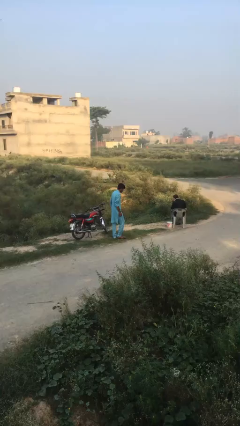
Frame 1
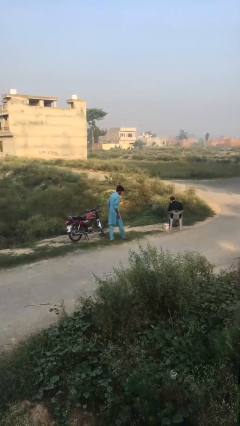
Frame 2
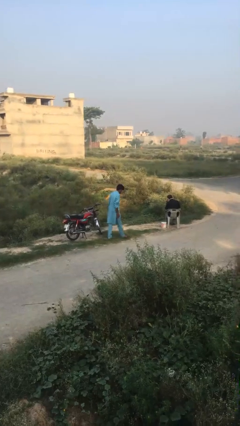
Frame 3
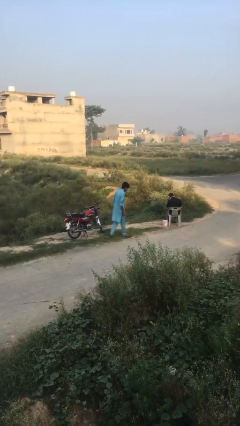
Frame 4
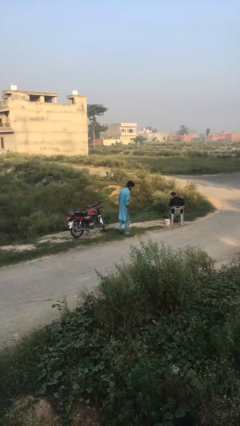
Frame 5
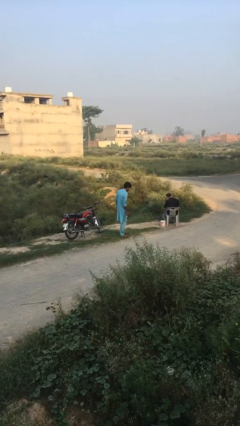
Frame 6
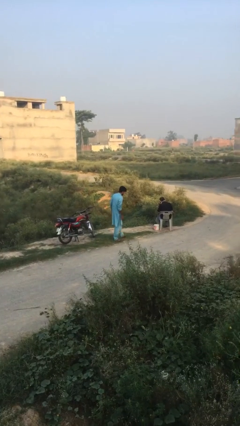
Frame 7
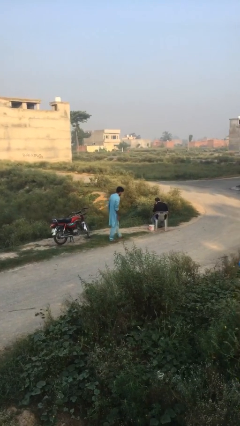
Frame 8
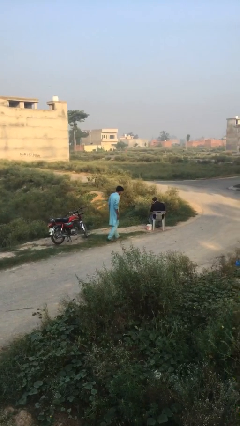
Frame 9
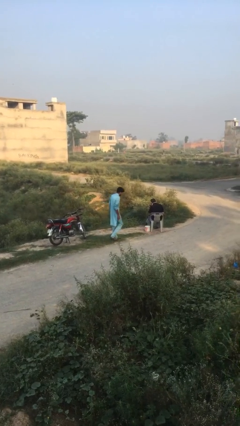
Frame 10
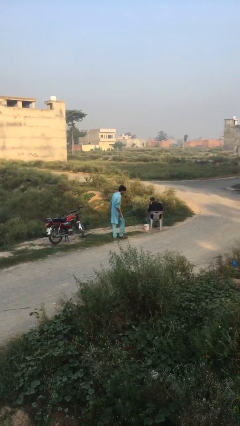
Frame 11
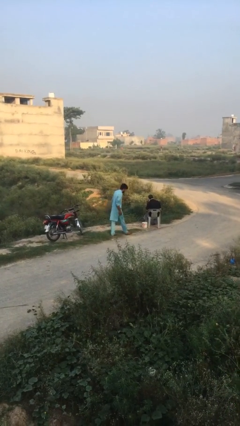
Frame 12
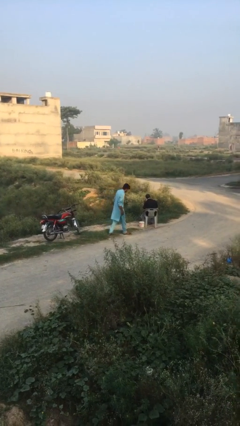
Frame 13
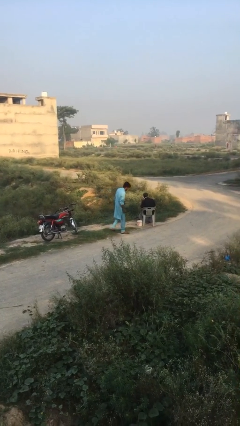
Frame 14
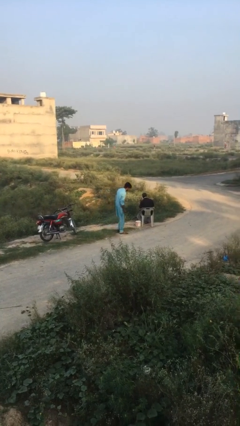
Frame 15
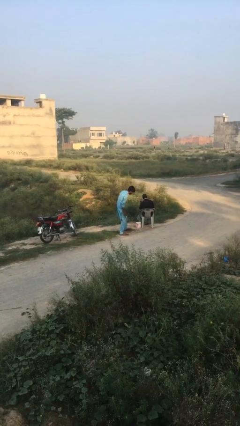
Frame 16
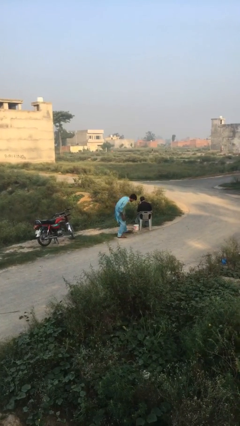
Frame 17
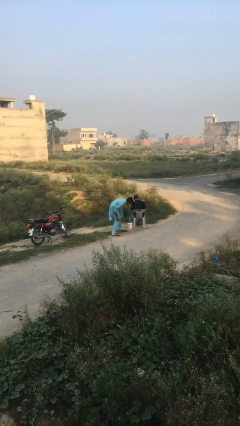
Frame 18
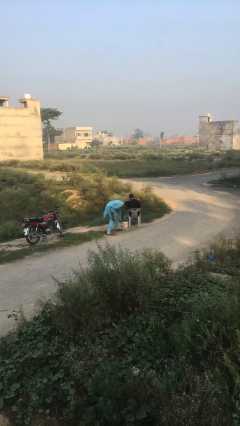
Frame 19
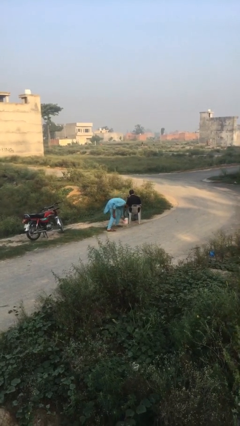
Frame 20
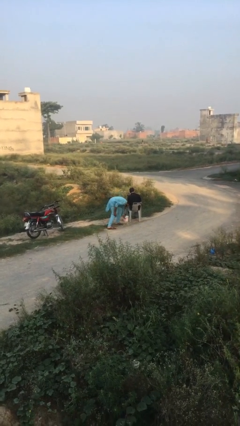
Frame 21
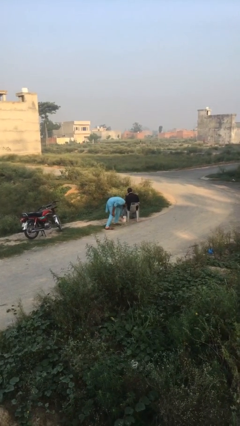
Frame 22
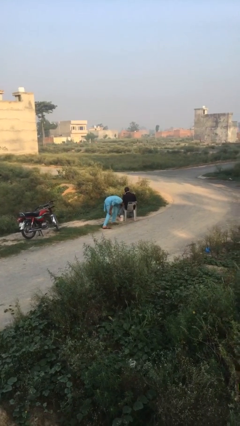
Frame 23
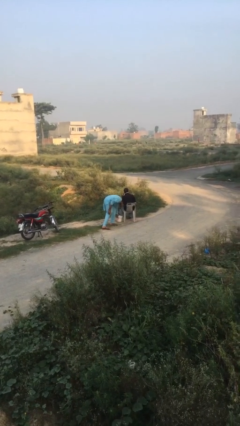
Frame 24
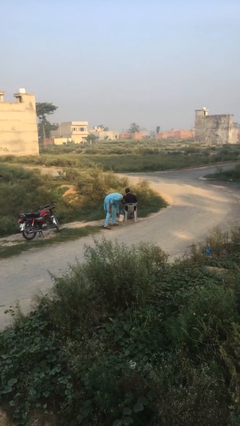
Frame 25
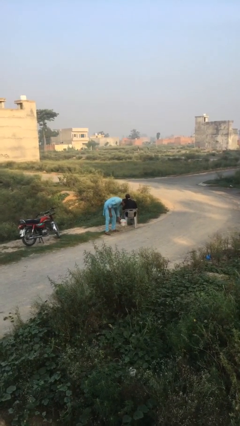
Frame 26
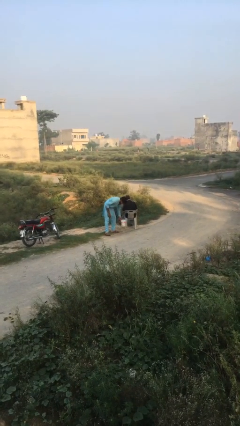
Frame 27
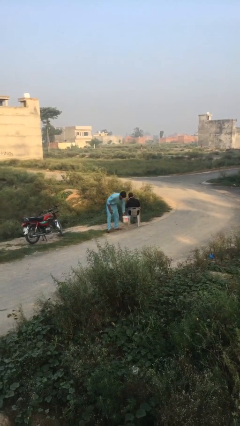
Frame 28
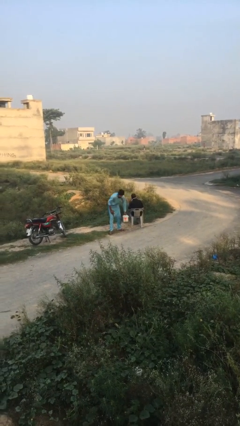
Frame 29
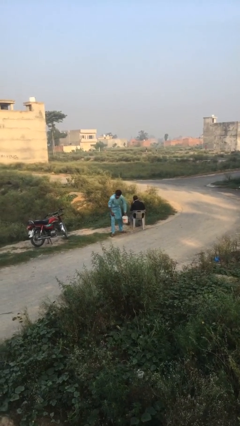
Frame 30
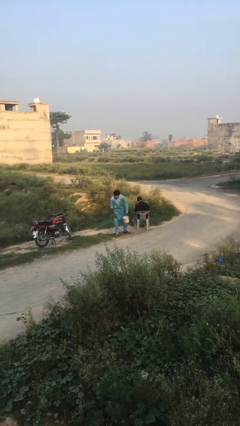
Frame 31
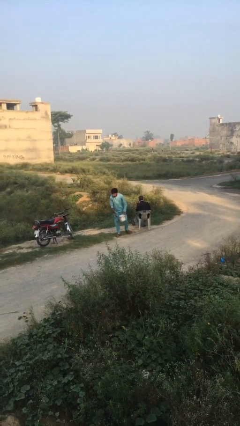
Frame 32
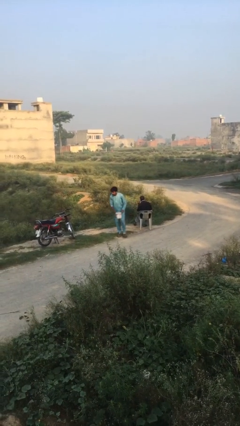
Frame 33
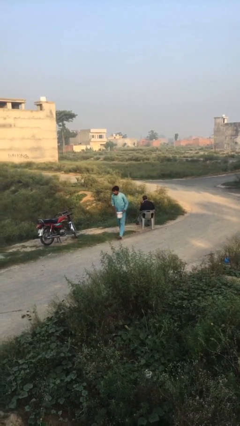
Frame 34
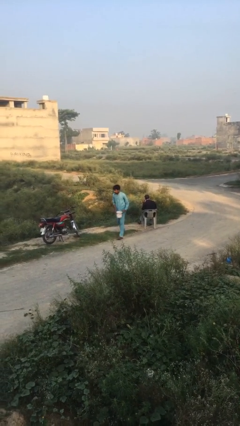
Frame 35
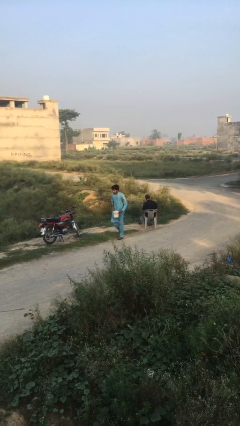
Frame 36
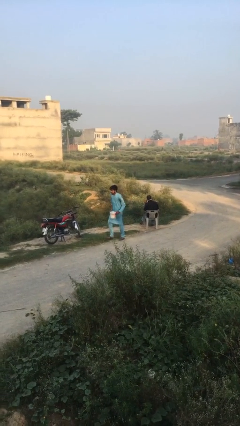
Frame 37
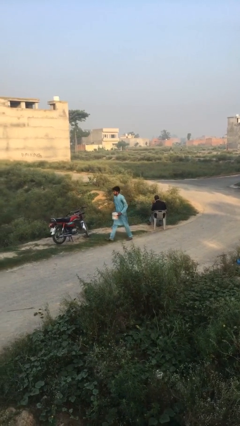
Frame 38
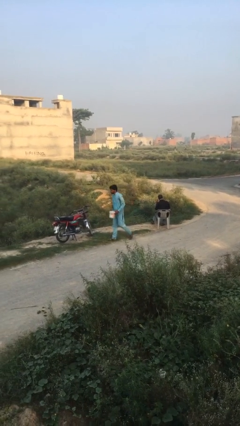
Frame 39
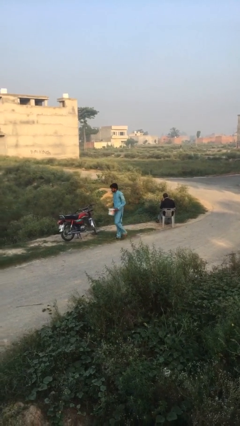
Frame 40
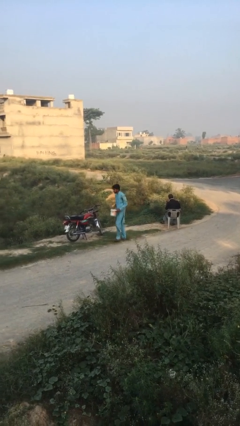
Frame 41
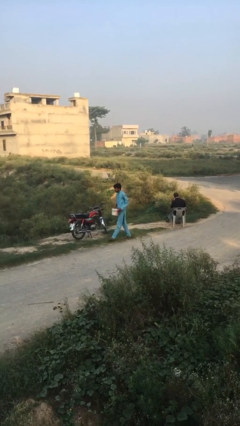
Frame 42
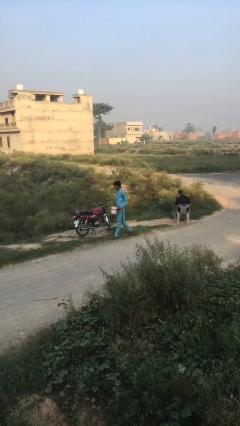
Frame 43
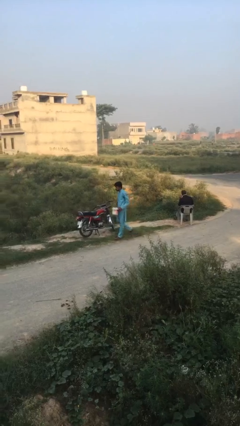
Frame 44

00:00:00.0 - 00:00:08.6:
person steals object from person

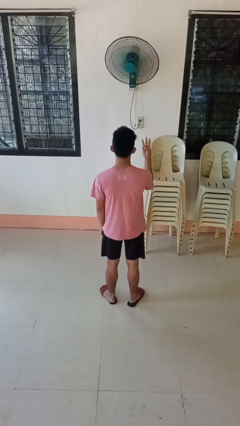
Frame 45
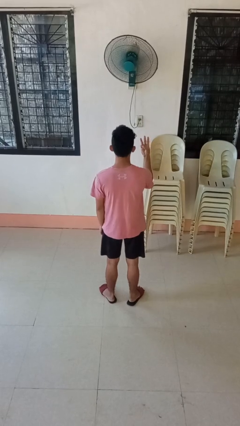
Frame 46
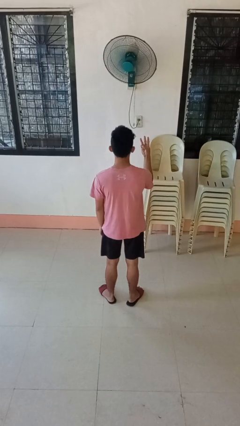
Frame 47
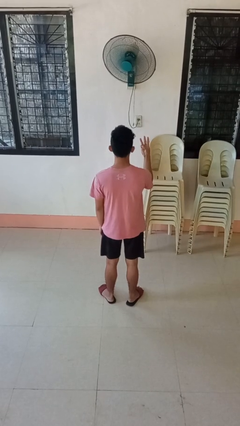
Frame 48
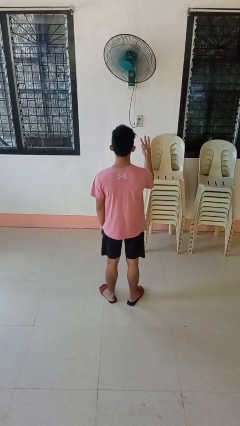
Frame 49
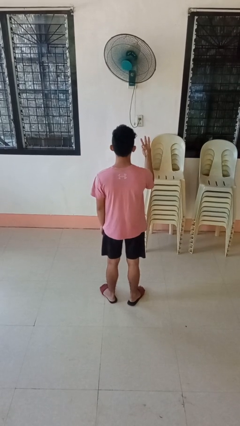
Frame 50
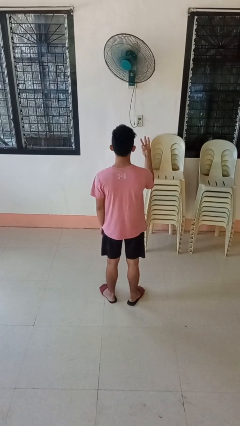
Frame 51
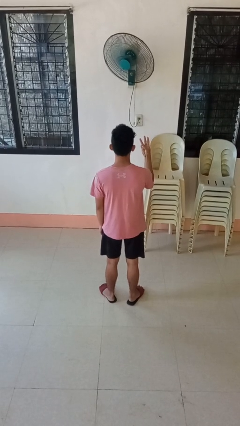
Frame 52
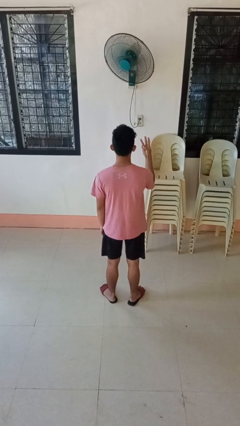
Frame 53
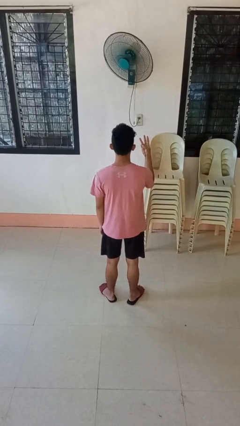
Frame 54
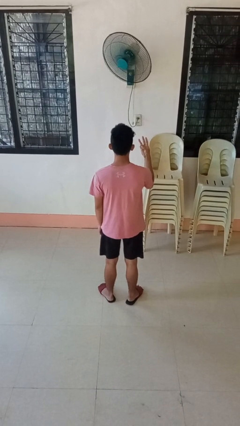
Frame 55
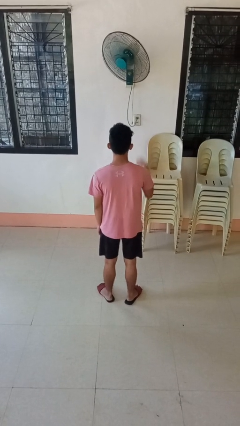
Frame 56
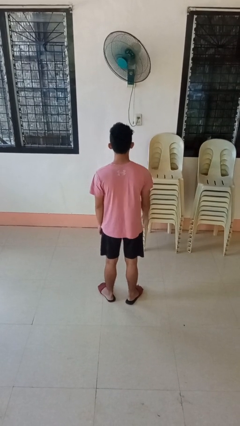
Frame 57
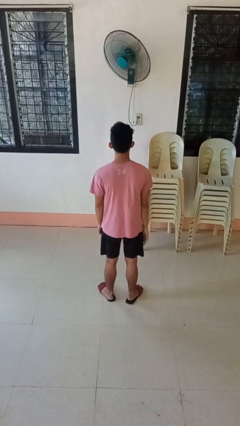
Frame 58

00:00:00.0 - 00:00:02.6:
person gestures number three

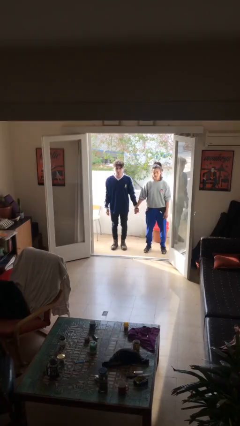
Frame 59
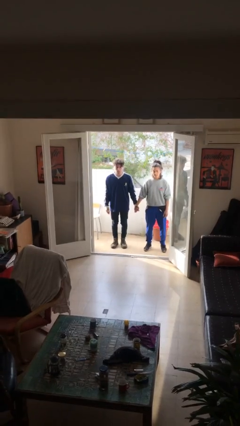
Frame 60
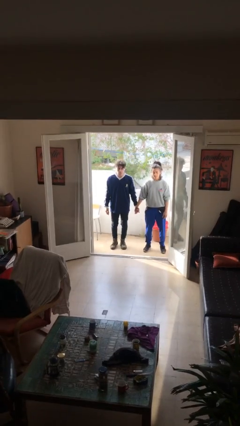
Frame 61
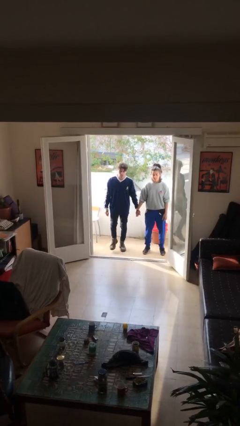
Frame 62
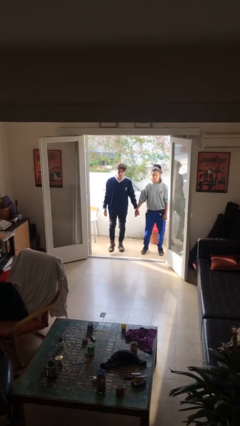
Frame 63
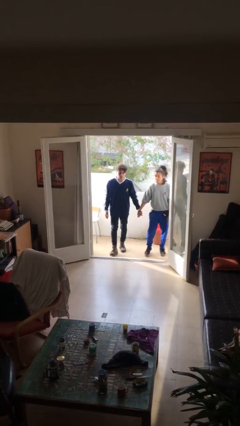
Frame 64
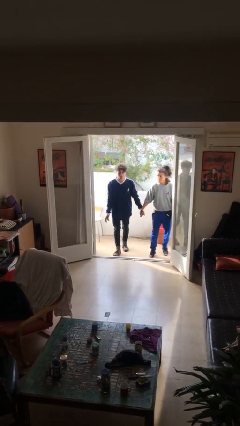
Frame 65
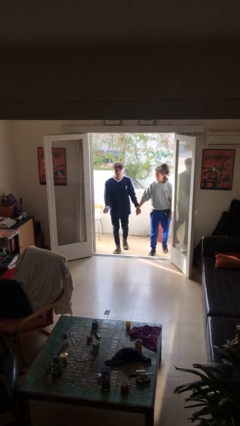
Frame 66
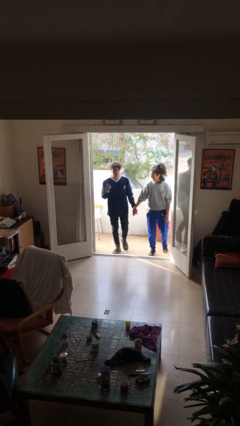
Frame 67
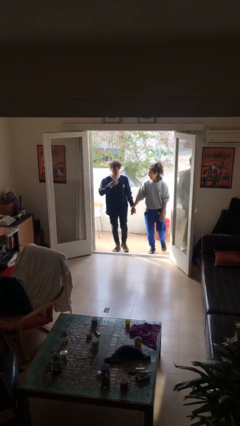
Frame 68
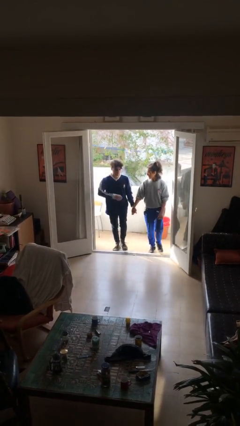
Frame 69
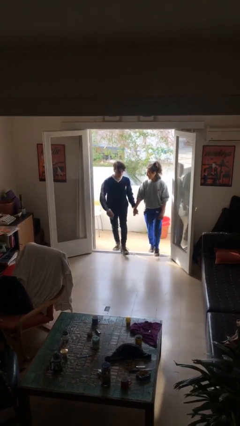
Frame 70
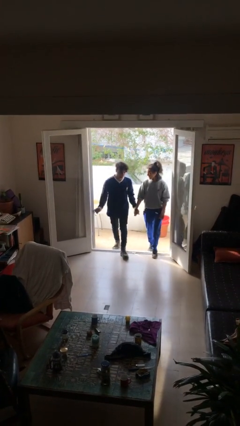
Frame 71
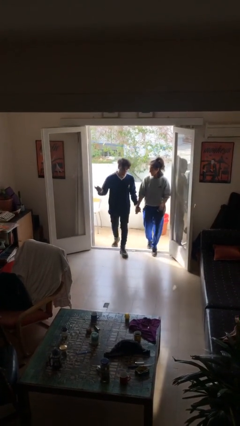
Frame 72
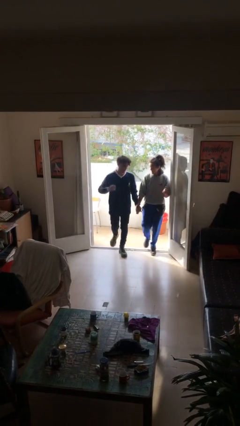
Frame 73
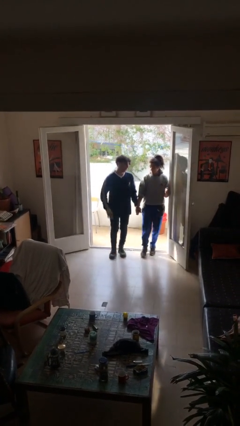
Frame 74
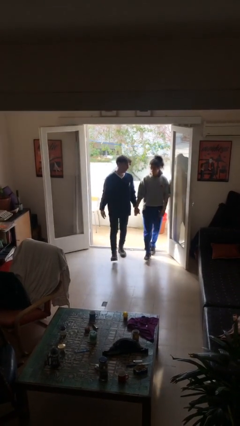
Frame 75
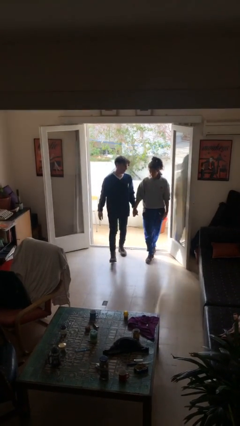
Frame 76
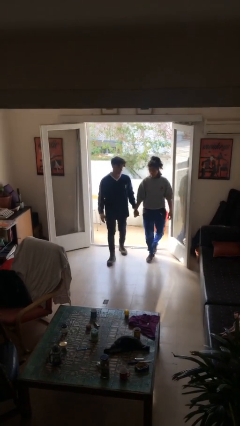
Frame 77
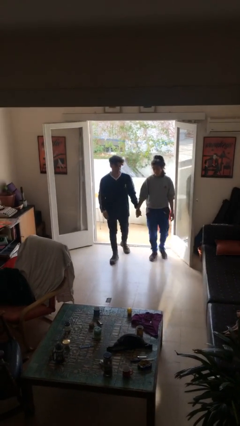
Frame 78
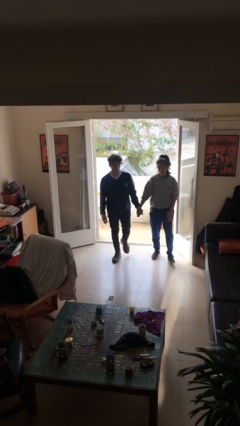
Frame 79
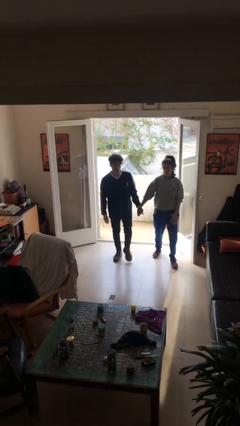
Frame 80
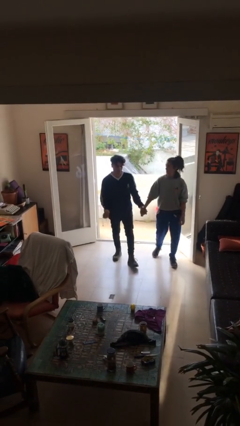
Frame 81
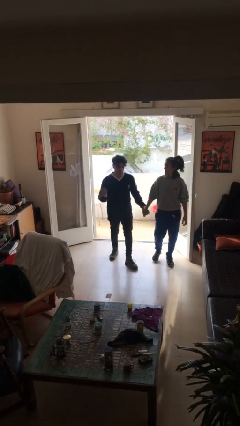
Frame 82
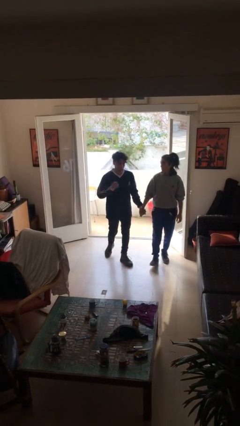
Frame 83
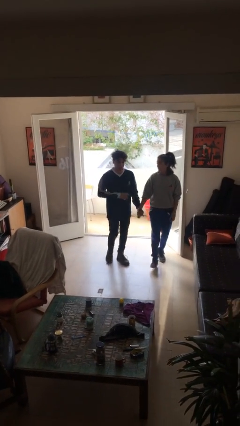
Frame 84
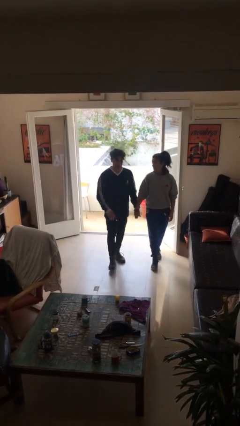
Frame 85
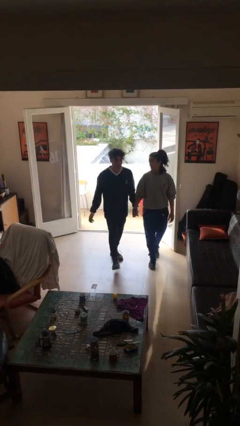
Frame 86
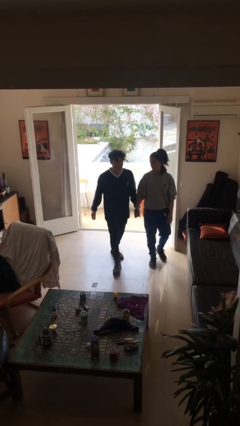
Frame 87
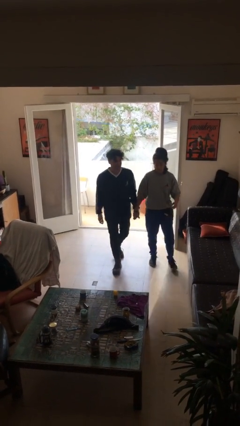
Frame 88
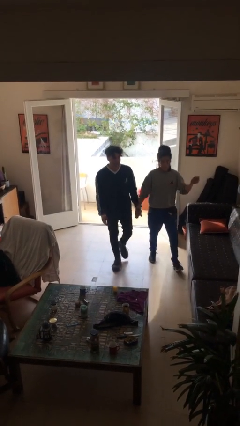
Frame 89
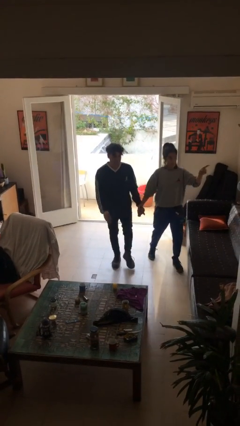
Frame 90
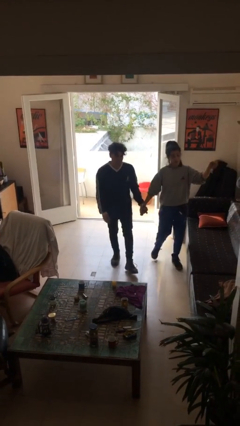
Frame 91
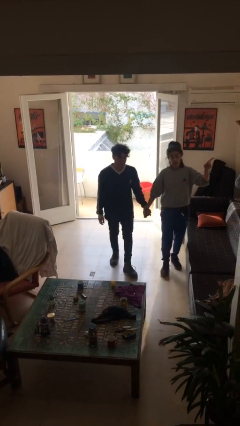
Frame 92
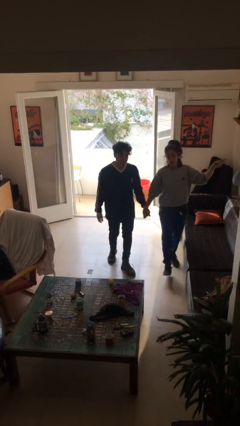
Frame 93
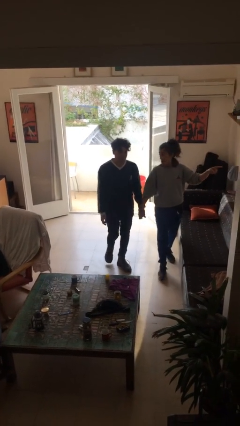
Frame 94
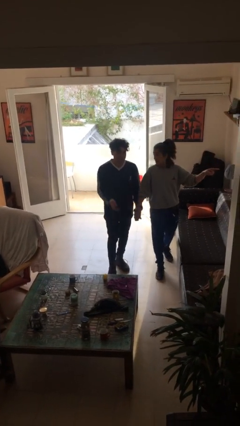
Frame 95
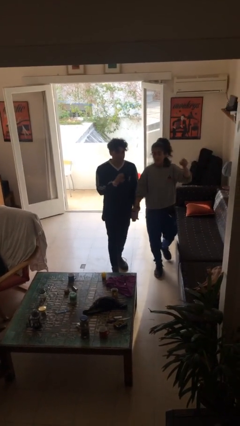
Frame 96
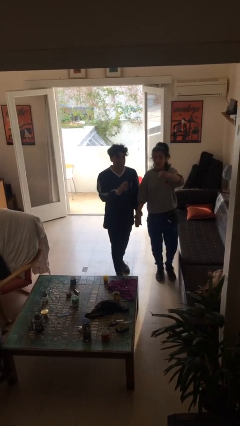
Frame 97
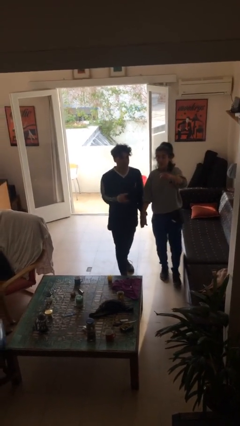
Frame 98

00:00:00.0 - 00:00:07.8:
person holds hand
